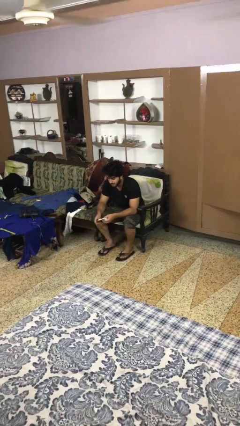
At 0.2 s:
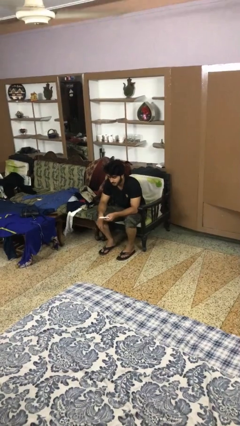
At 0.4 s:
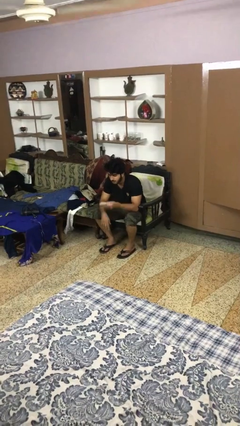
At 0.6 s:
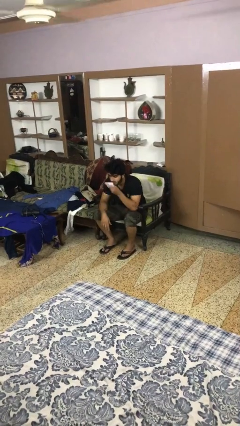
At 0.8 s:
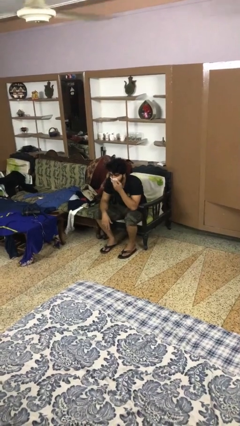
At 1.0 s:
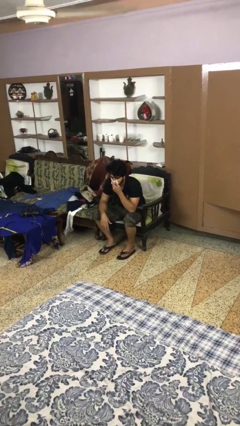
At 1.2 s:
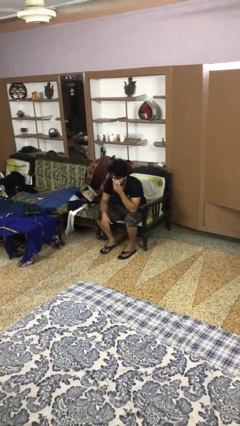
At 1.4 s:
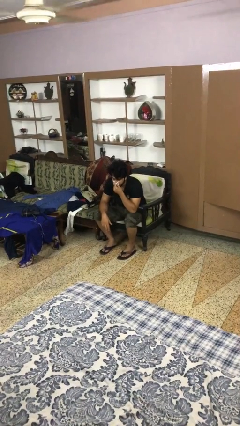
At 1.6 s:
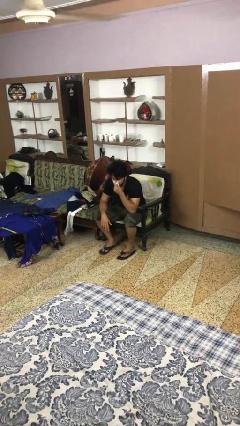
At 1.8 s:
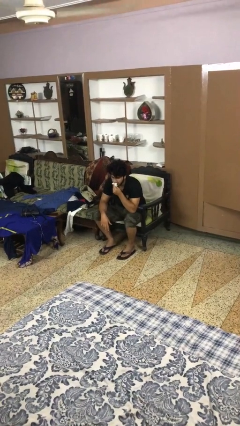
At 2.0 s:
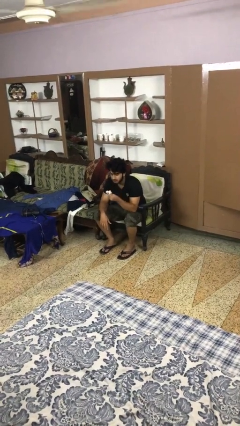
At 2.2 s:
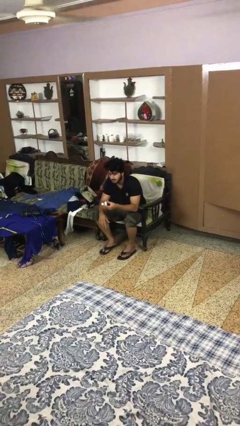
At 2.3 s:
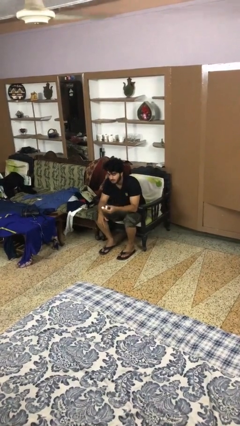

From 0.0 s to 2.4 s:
person blows nose

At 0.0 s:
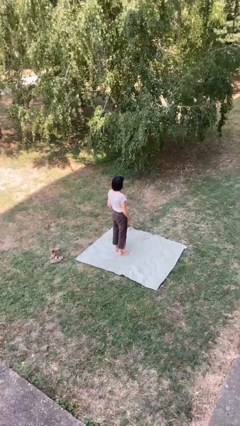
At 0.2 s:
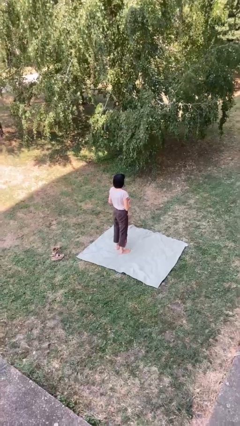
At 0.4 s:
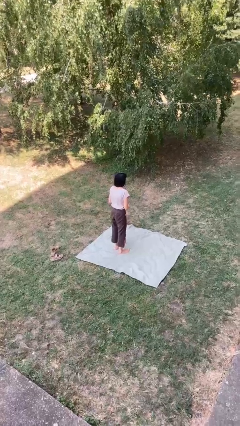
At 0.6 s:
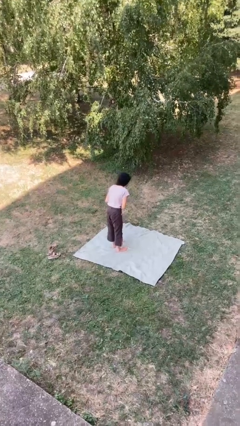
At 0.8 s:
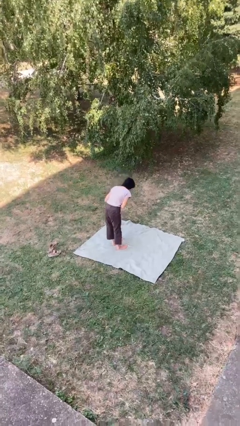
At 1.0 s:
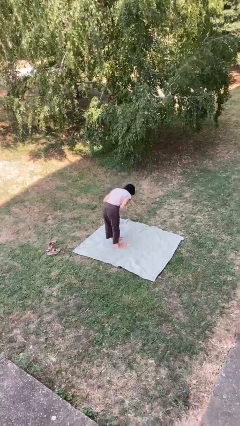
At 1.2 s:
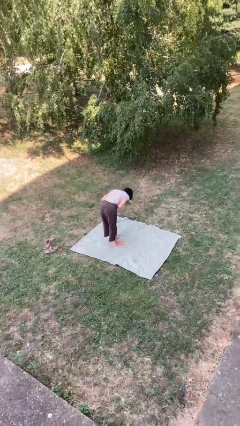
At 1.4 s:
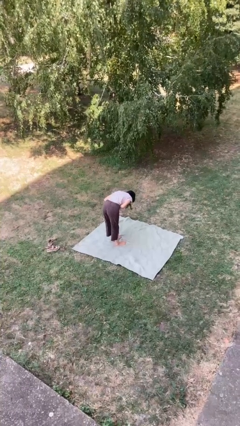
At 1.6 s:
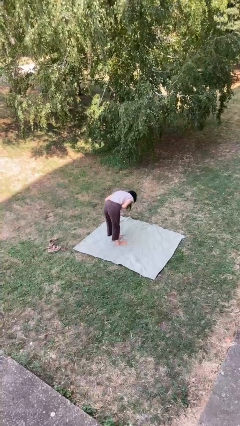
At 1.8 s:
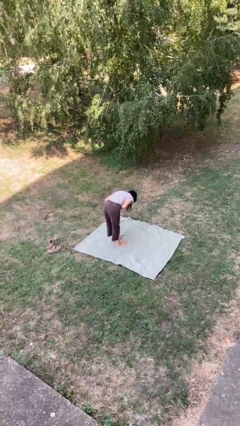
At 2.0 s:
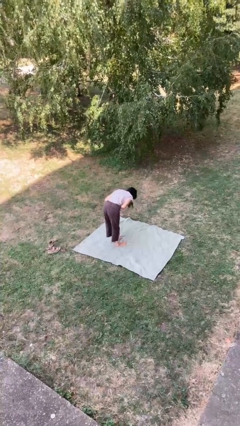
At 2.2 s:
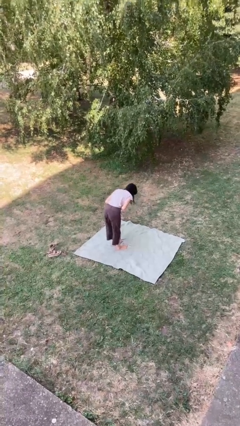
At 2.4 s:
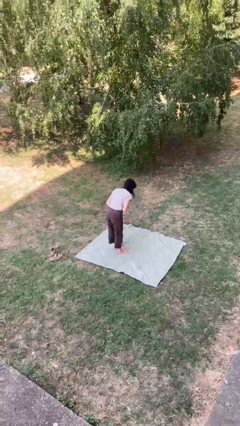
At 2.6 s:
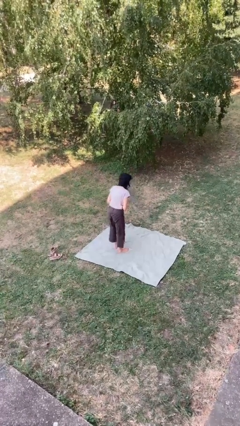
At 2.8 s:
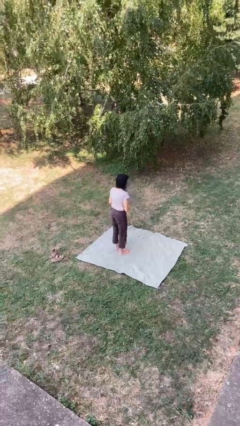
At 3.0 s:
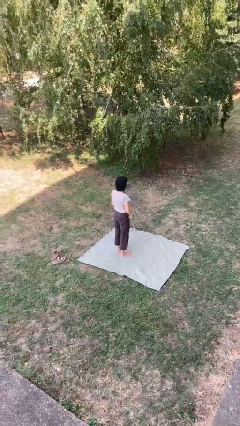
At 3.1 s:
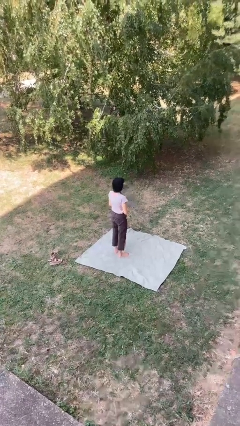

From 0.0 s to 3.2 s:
person bows

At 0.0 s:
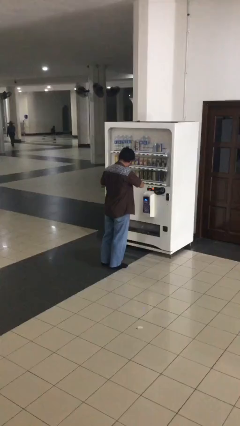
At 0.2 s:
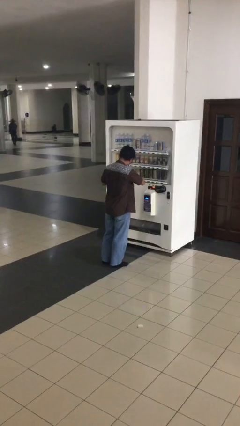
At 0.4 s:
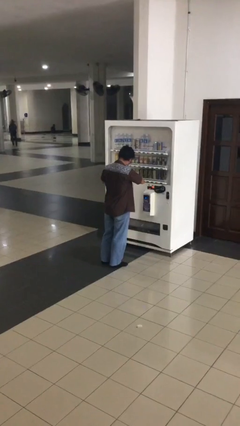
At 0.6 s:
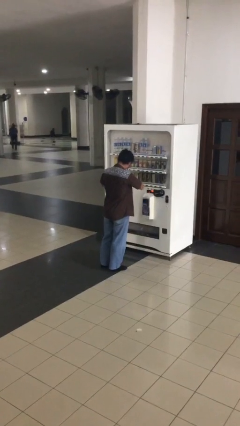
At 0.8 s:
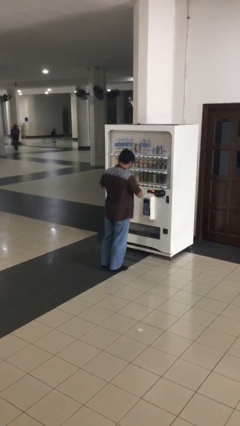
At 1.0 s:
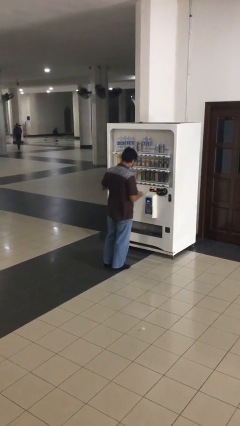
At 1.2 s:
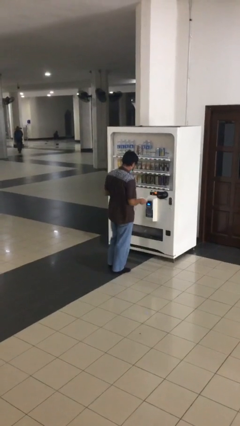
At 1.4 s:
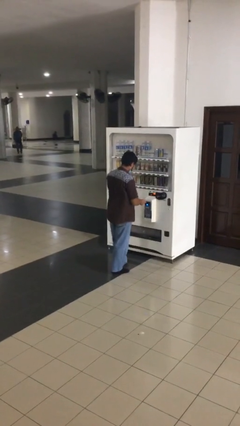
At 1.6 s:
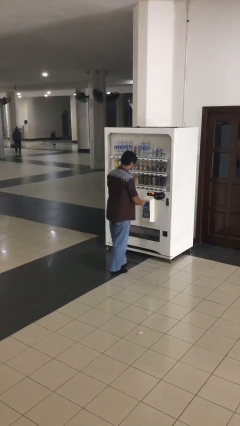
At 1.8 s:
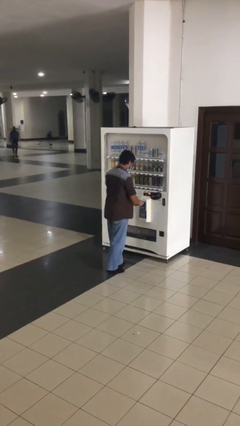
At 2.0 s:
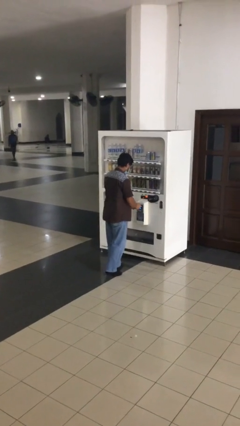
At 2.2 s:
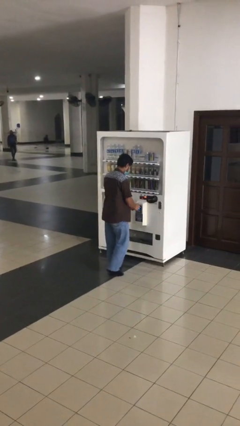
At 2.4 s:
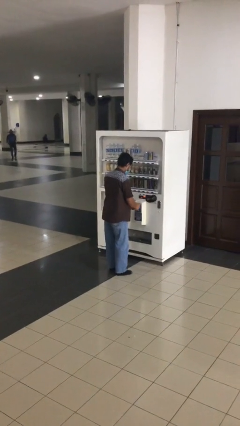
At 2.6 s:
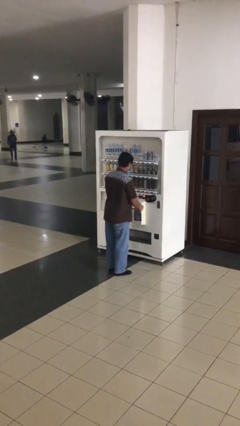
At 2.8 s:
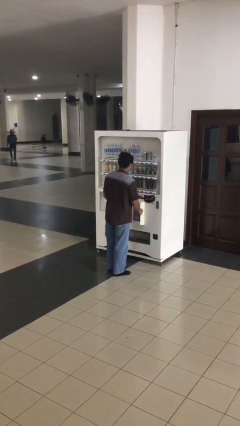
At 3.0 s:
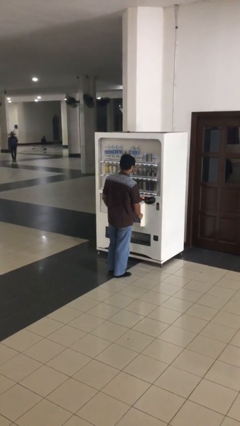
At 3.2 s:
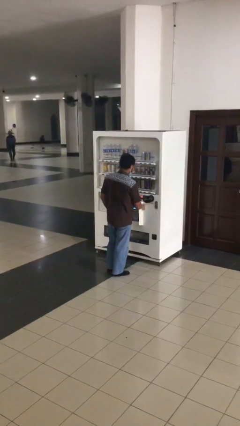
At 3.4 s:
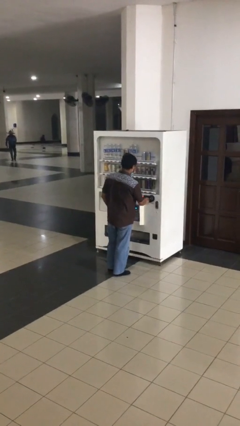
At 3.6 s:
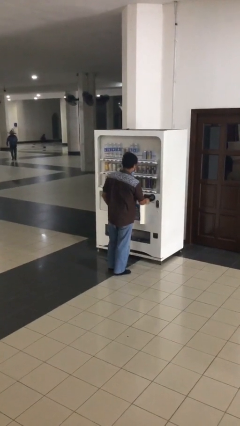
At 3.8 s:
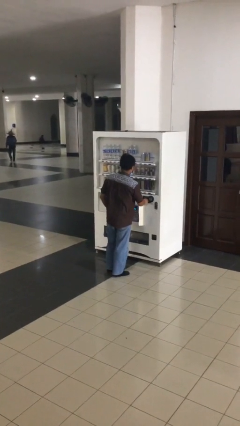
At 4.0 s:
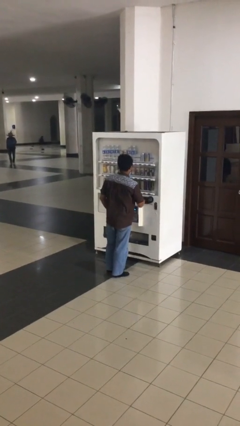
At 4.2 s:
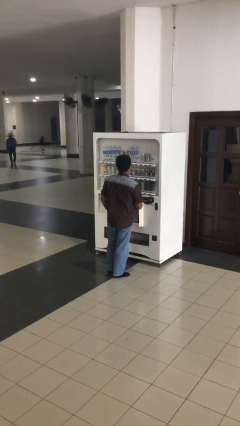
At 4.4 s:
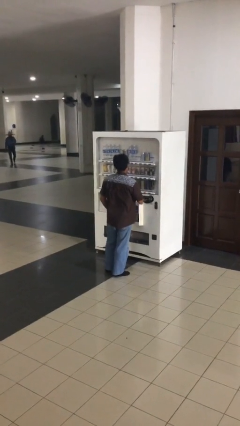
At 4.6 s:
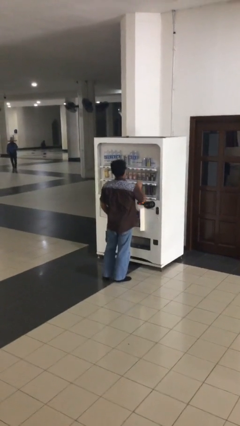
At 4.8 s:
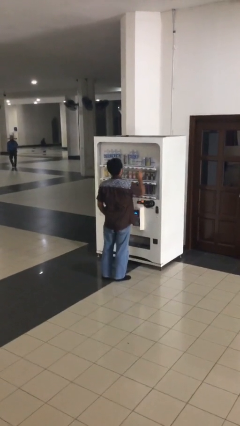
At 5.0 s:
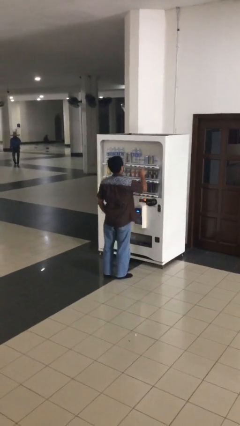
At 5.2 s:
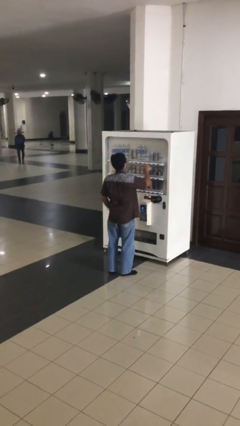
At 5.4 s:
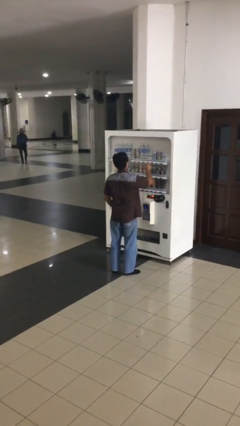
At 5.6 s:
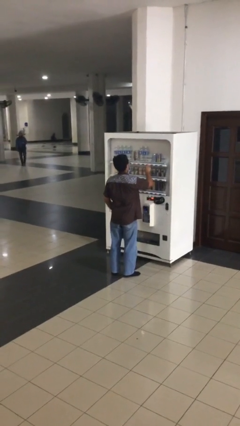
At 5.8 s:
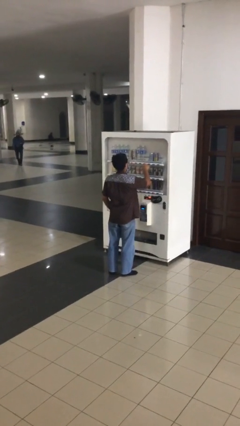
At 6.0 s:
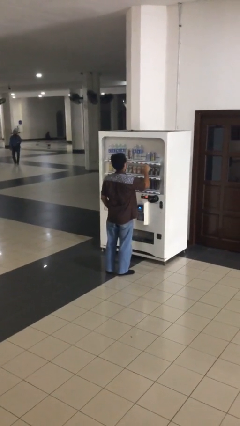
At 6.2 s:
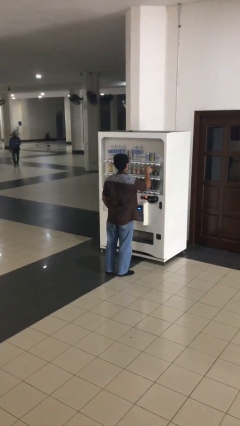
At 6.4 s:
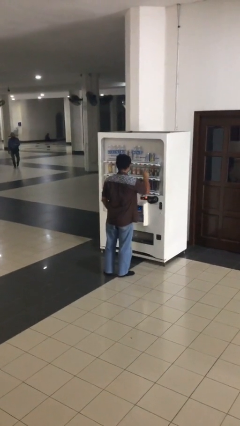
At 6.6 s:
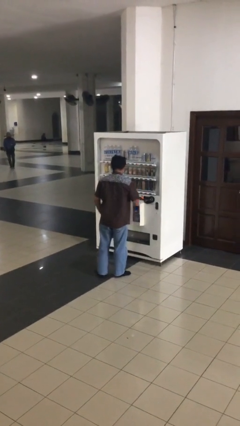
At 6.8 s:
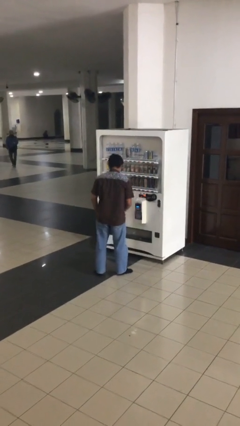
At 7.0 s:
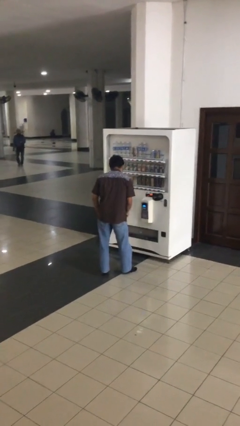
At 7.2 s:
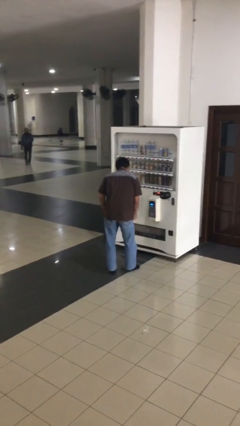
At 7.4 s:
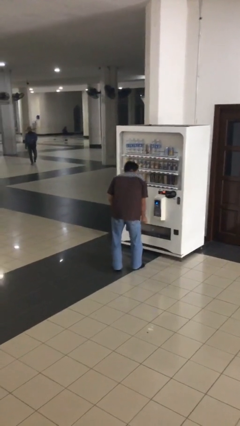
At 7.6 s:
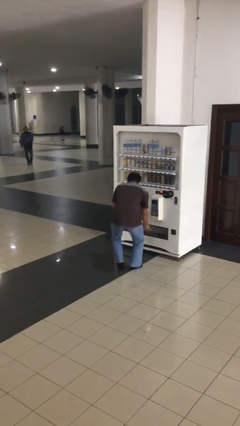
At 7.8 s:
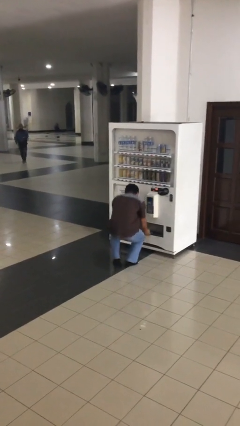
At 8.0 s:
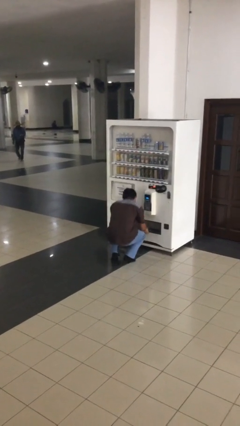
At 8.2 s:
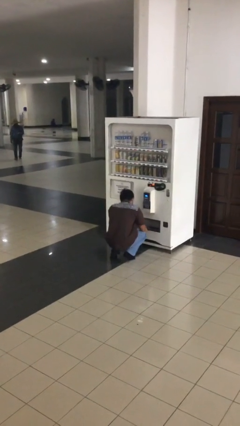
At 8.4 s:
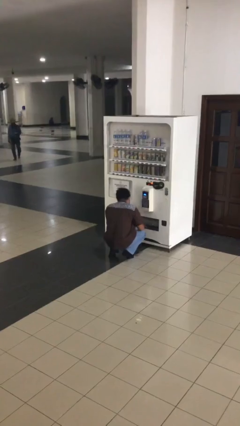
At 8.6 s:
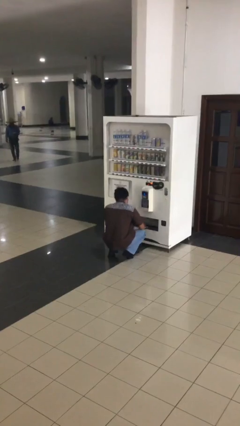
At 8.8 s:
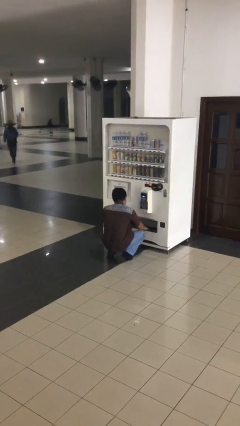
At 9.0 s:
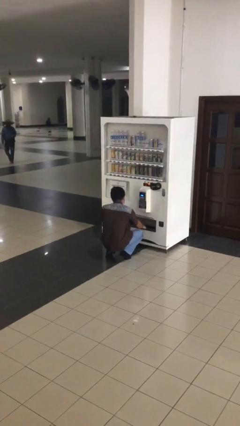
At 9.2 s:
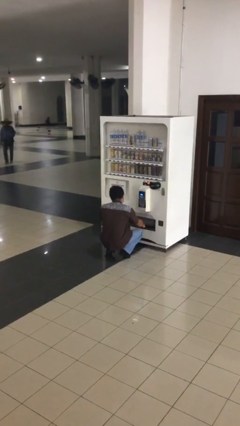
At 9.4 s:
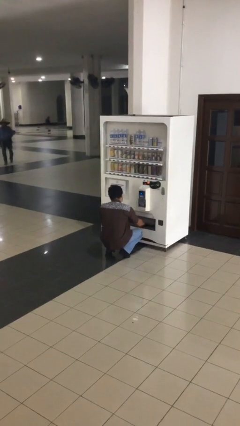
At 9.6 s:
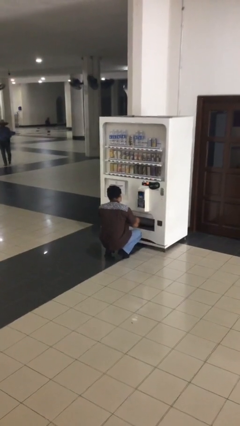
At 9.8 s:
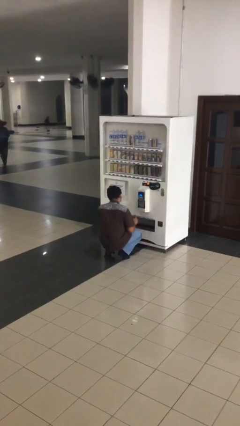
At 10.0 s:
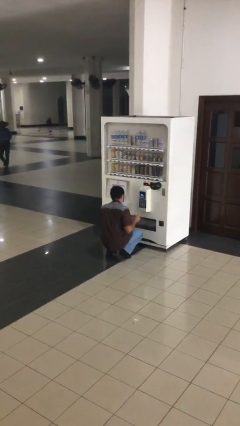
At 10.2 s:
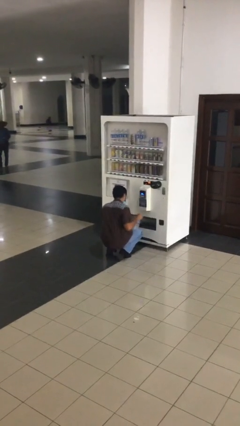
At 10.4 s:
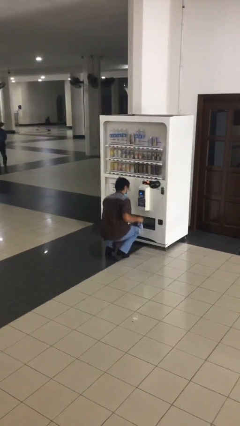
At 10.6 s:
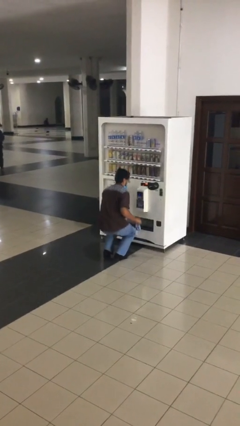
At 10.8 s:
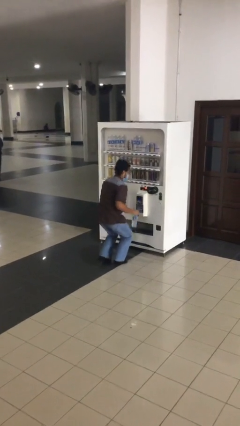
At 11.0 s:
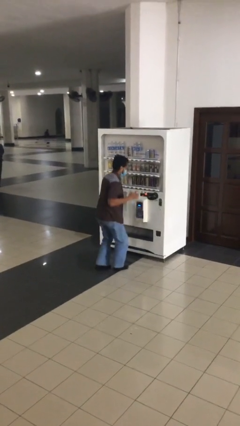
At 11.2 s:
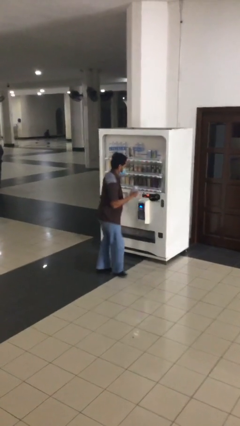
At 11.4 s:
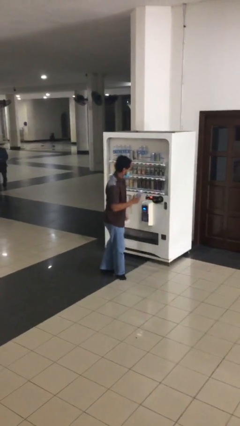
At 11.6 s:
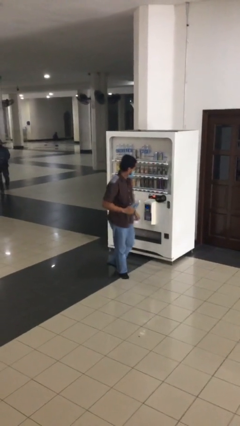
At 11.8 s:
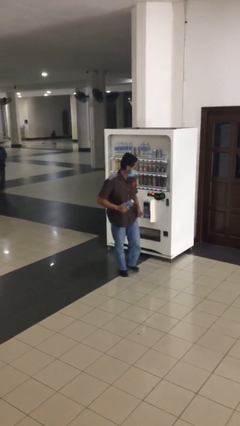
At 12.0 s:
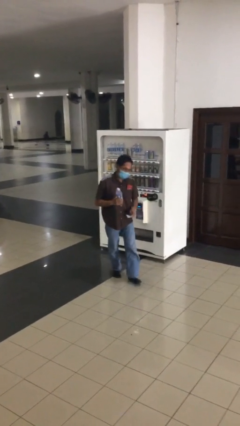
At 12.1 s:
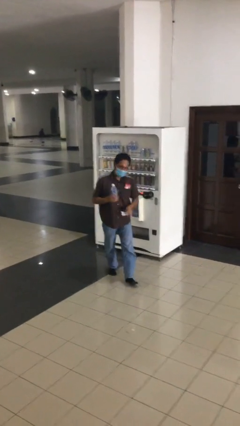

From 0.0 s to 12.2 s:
person purchases from machine
